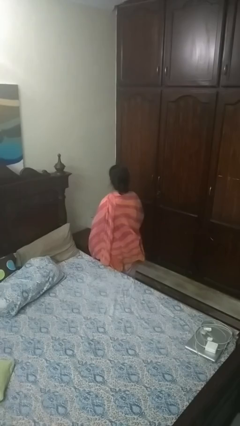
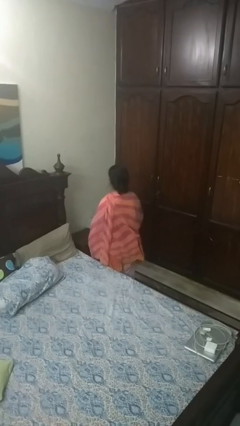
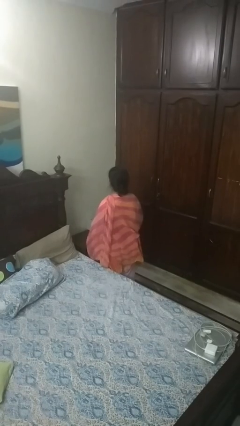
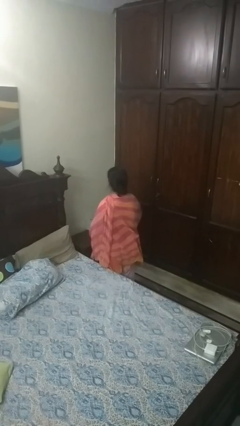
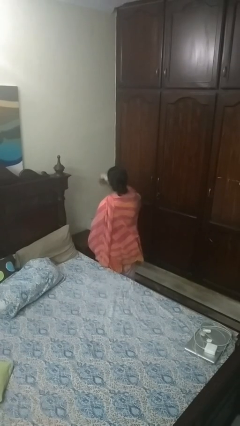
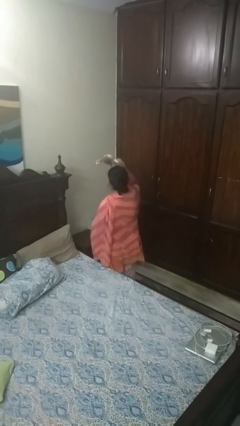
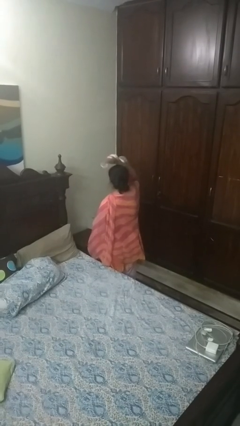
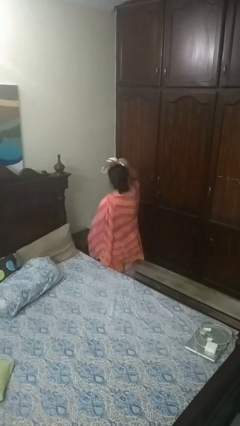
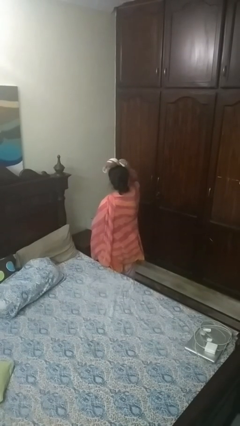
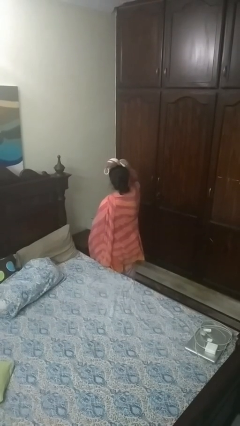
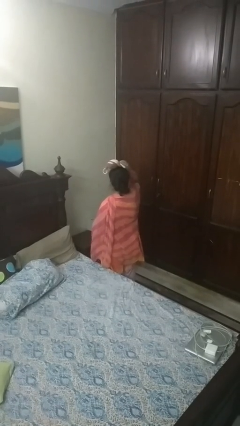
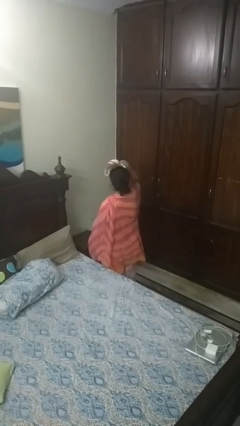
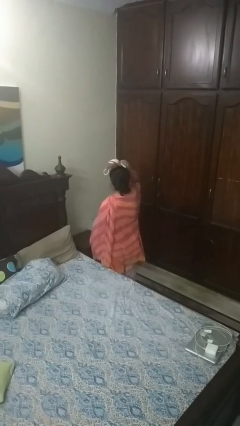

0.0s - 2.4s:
person holds object above head

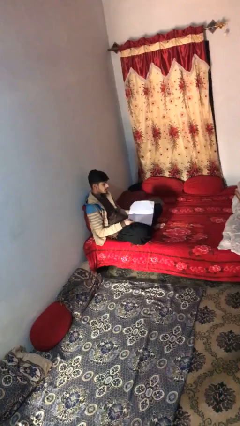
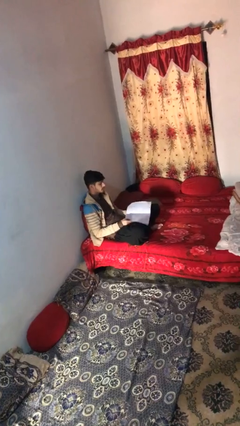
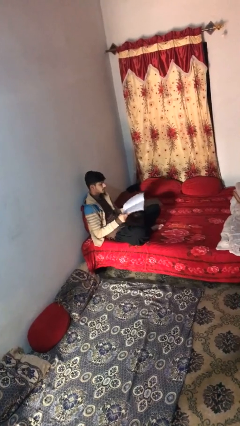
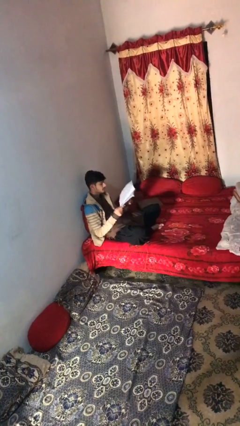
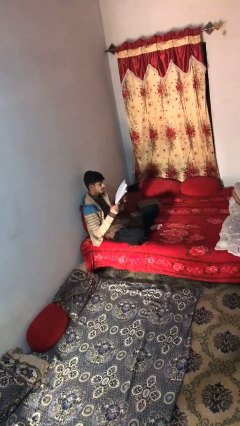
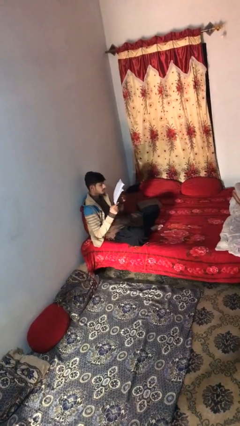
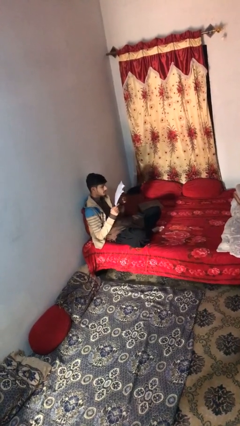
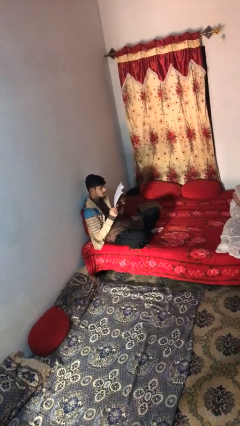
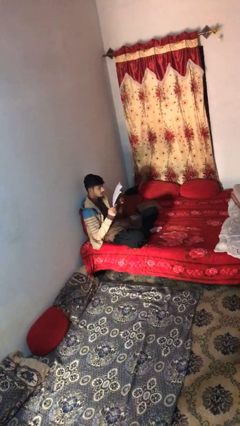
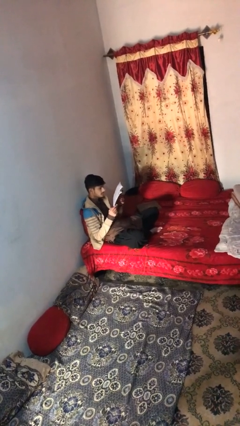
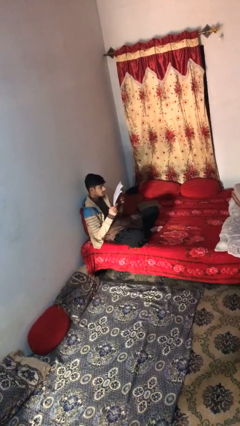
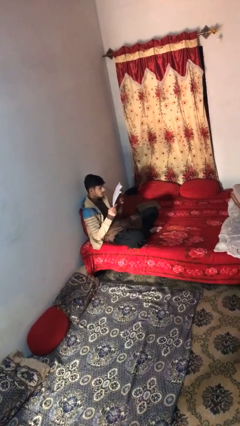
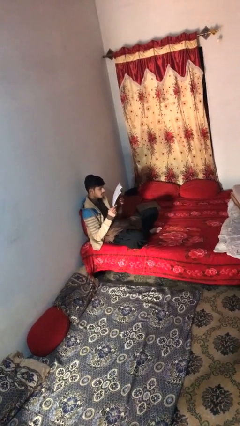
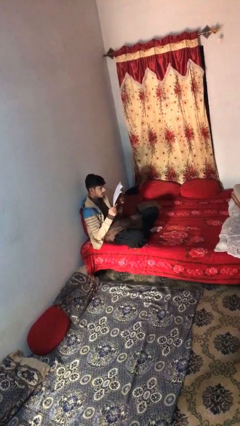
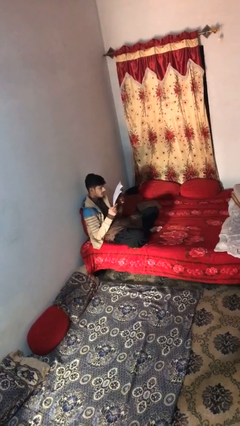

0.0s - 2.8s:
person reads document

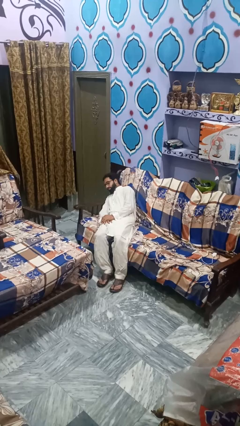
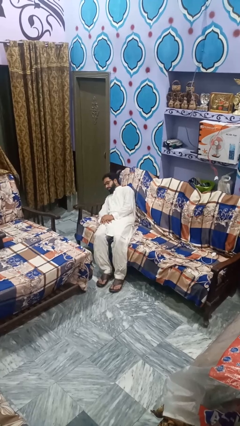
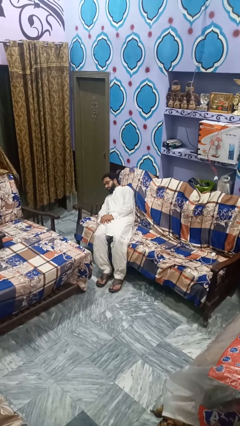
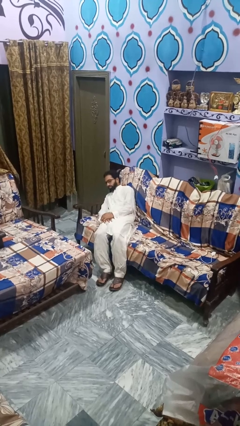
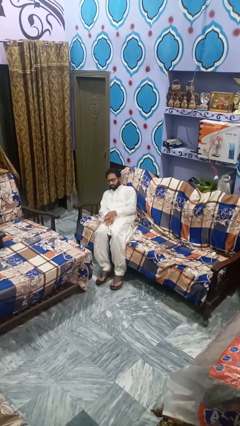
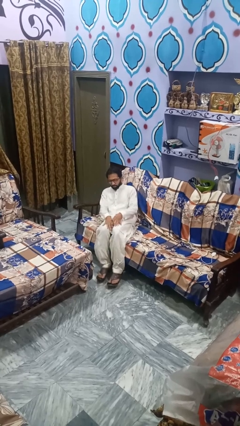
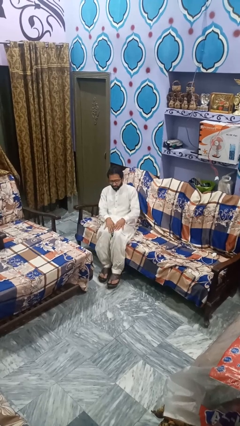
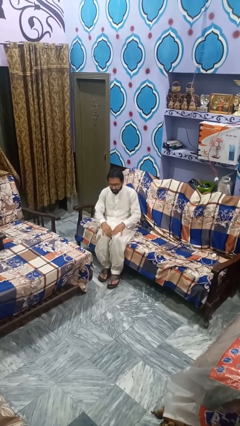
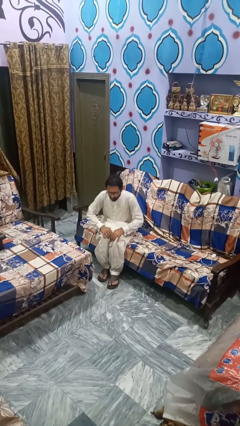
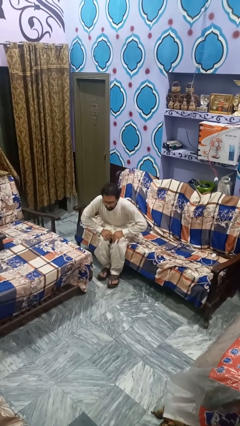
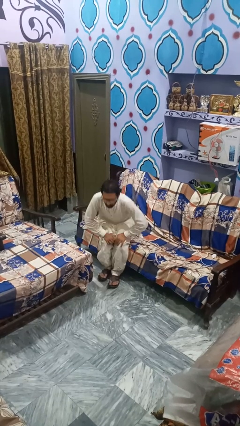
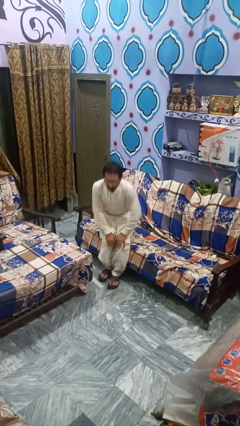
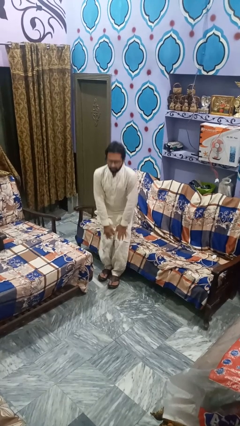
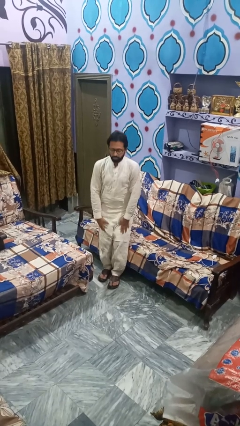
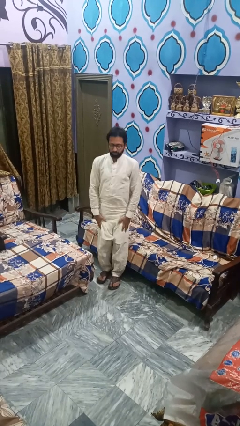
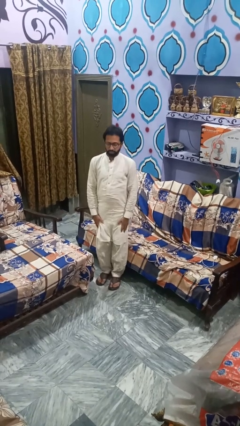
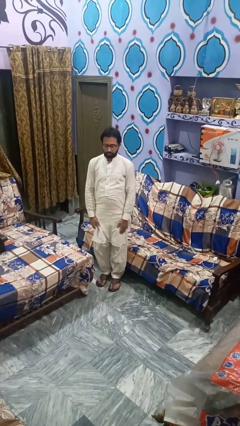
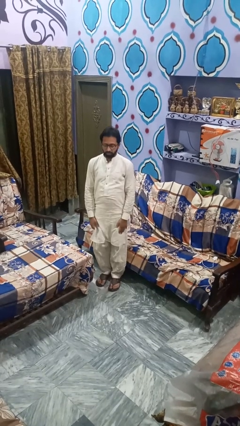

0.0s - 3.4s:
person stands up

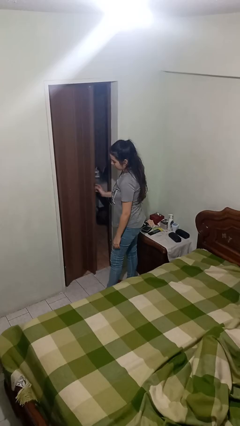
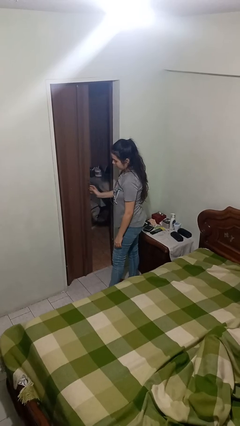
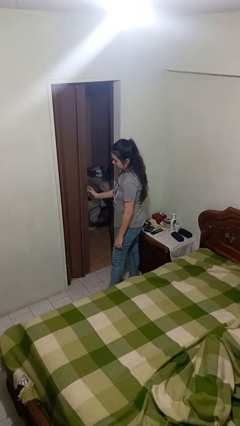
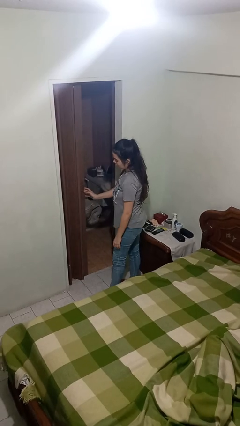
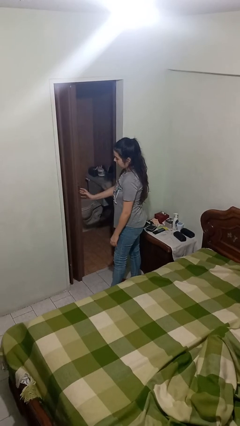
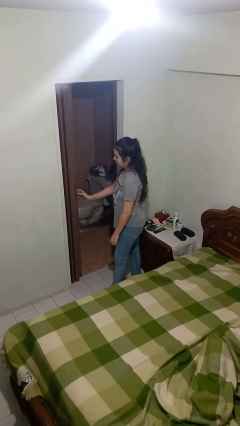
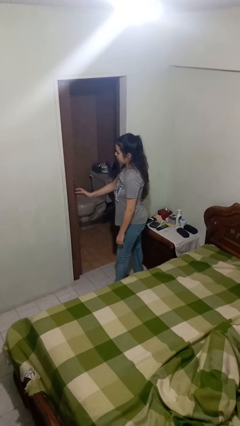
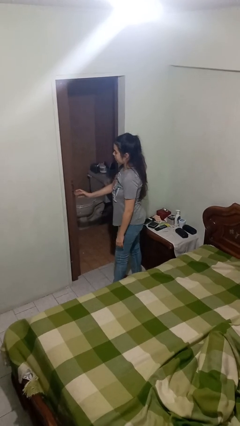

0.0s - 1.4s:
person opens sliding door

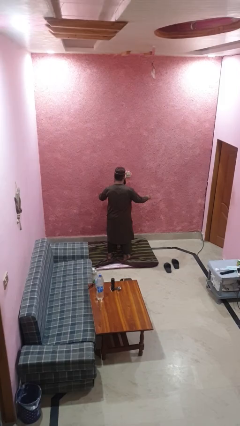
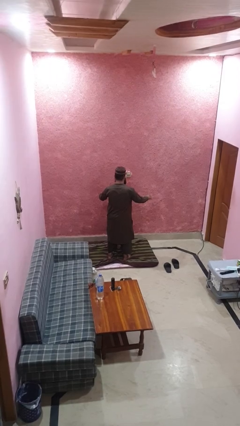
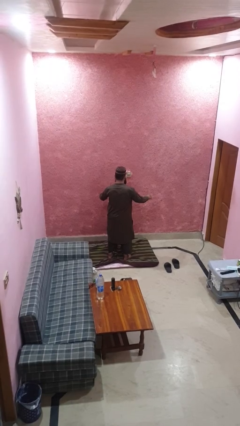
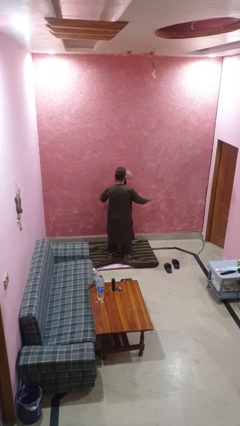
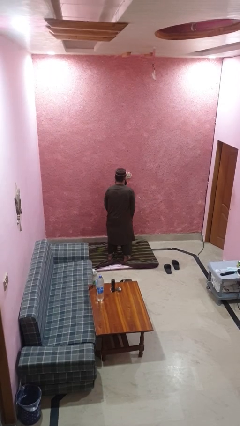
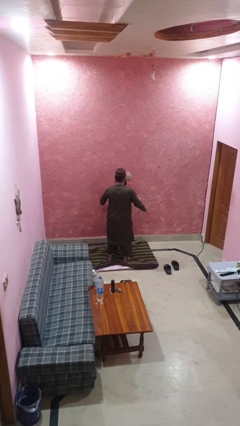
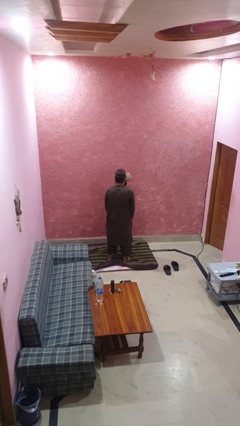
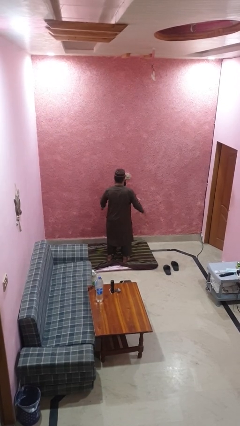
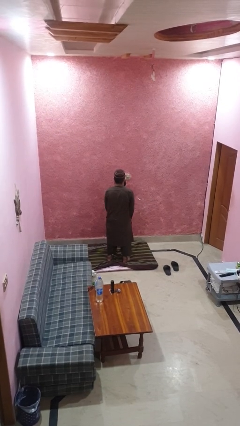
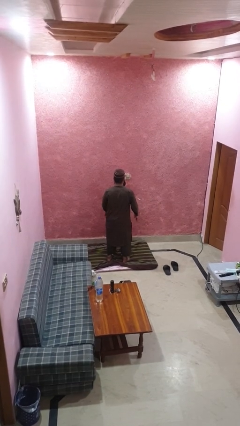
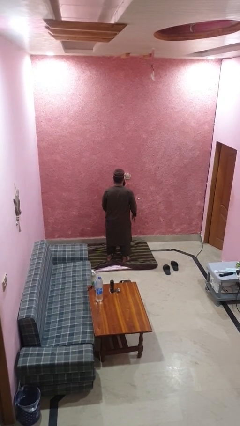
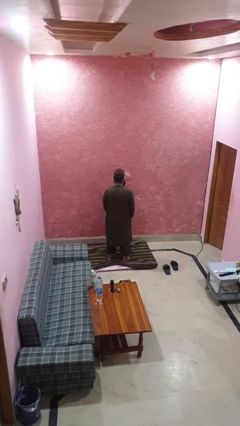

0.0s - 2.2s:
person slaps hands on thighs

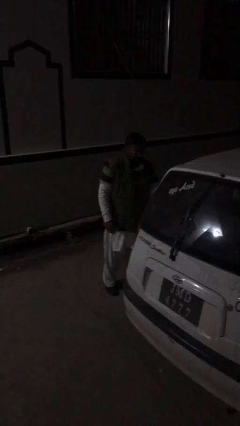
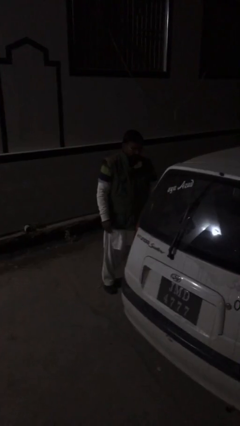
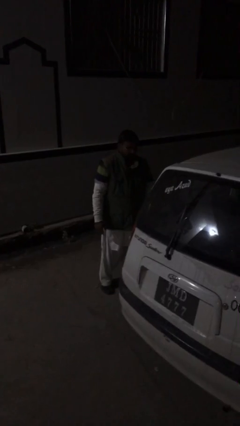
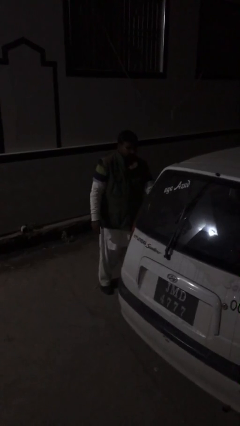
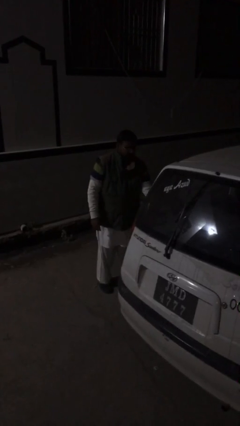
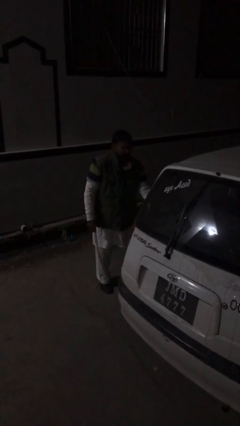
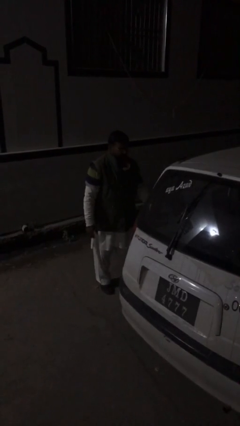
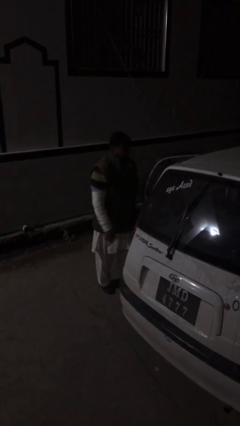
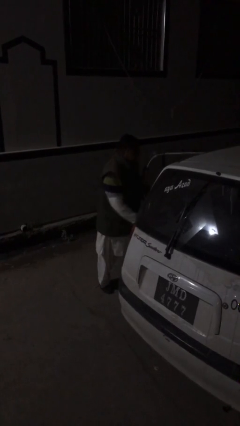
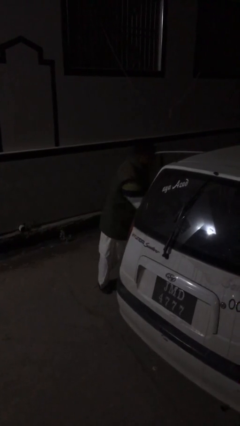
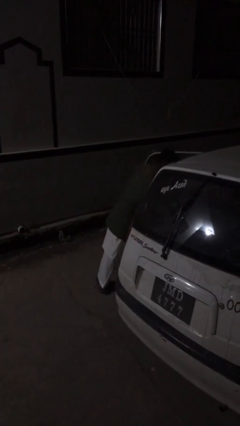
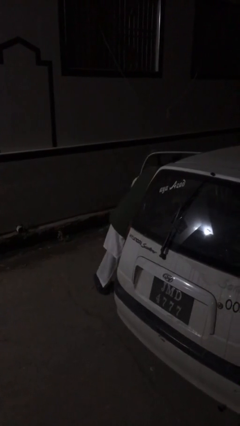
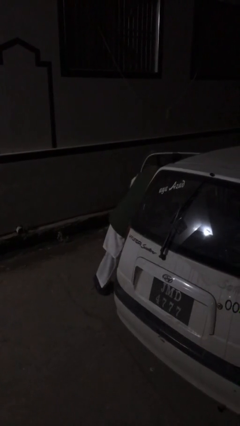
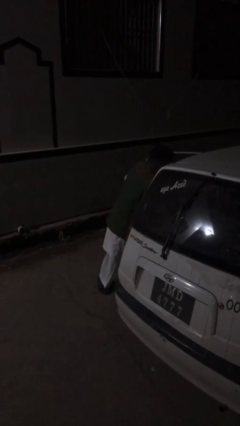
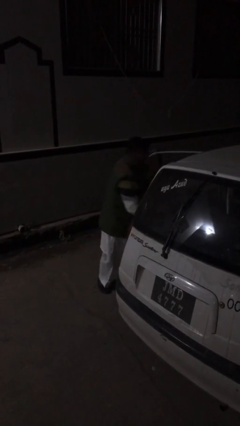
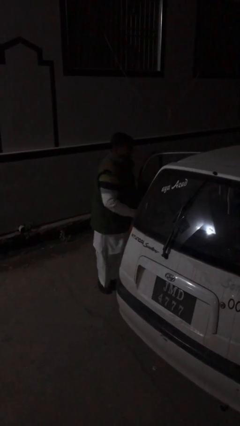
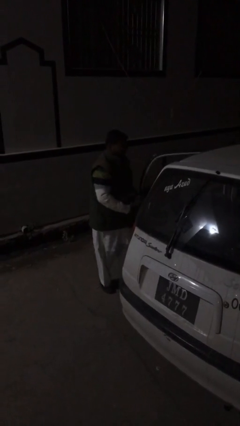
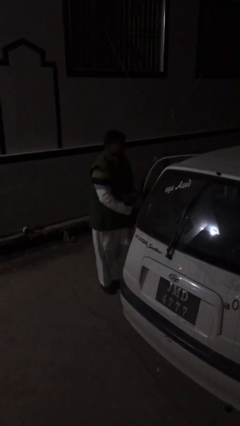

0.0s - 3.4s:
person unloads car

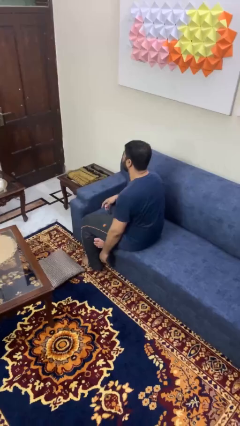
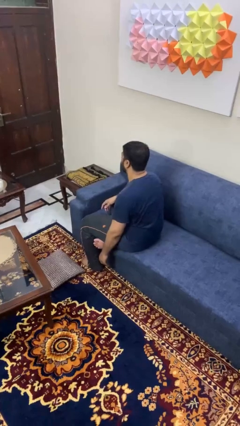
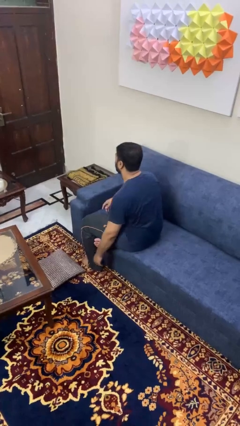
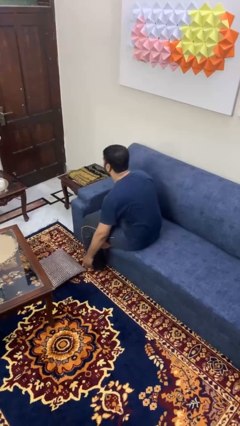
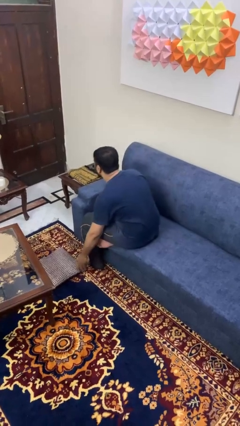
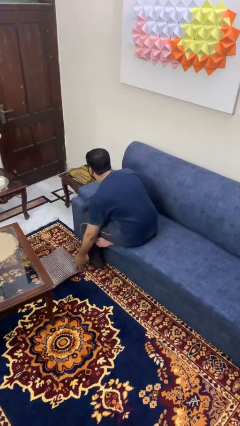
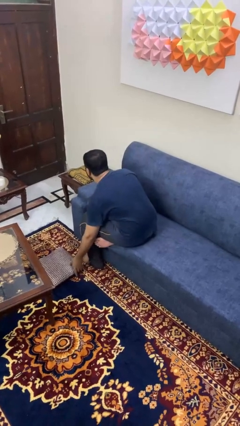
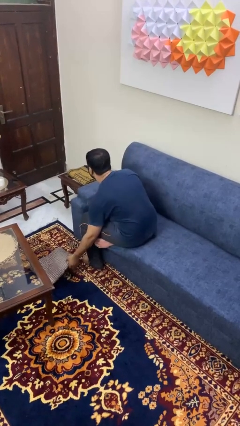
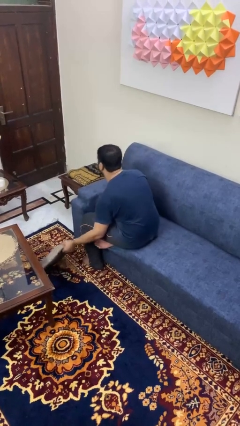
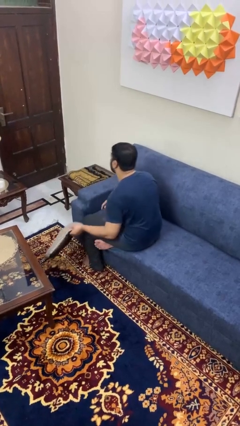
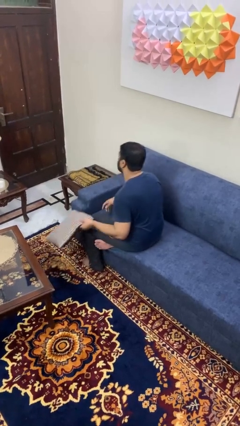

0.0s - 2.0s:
person picks up object from floor
